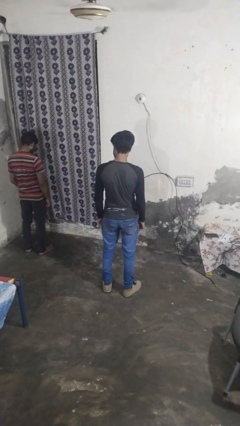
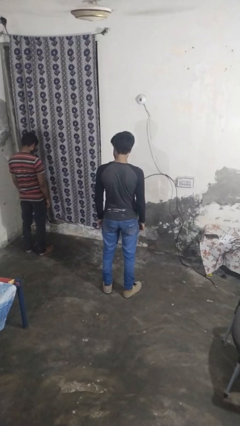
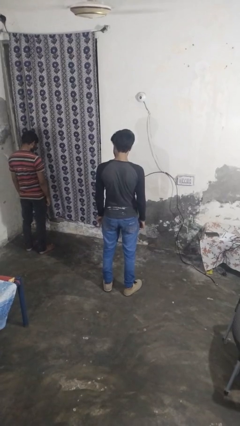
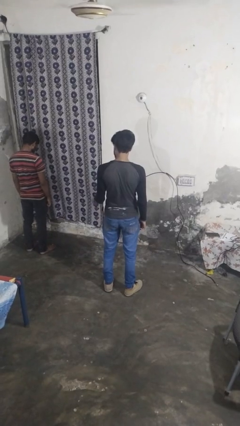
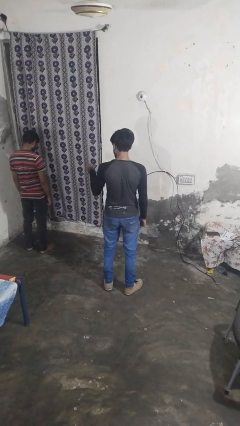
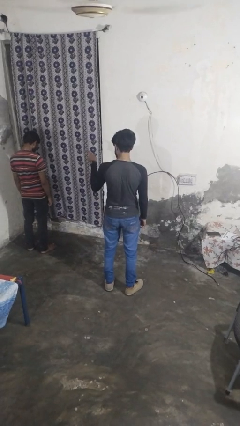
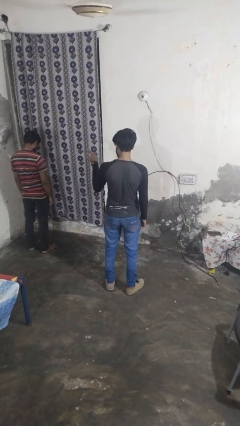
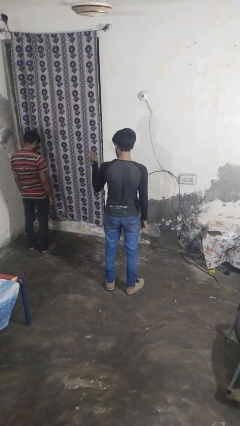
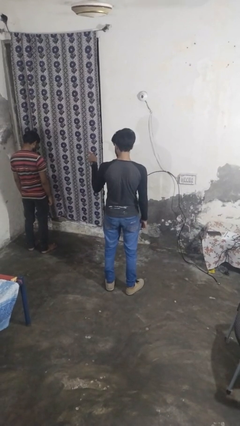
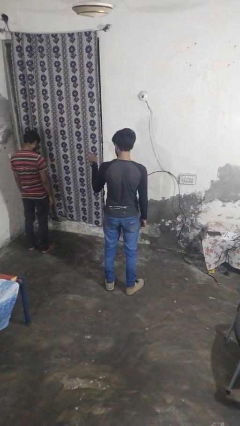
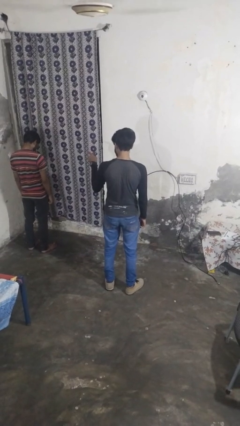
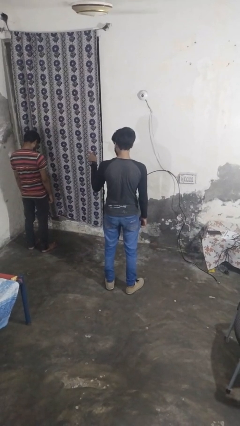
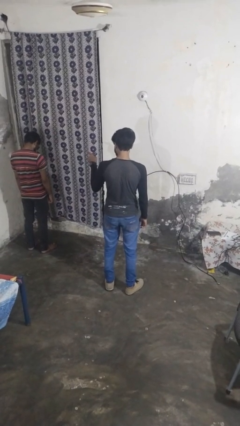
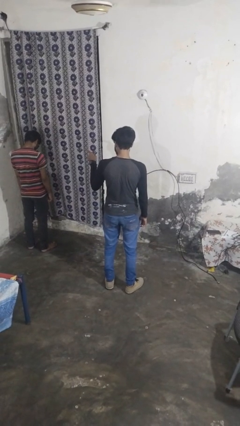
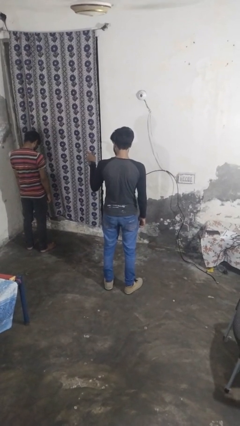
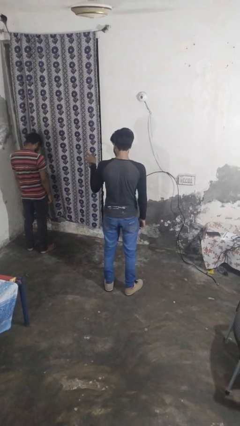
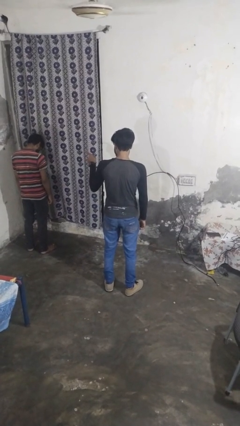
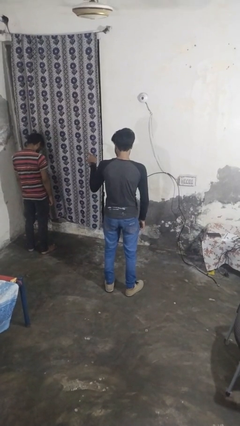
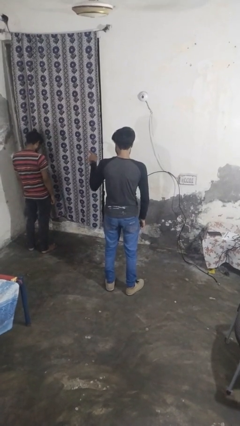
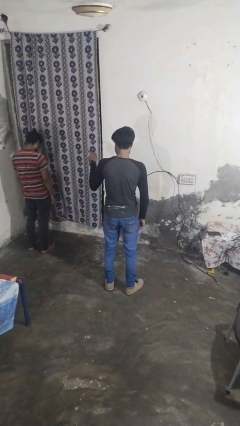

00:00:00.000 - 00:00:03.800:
person points at person

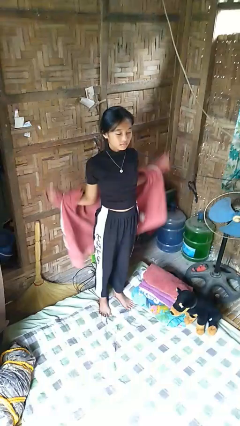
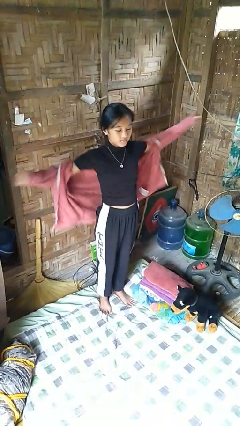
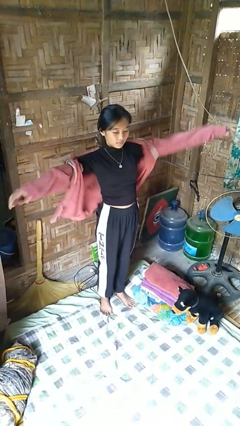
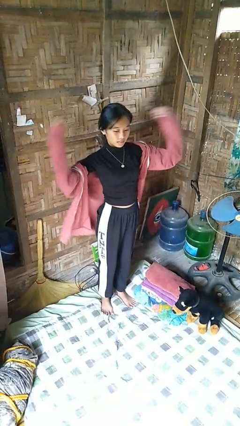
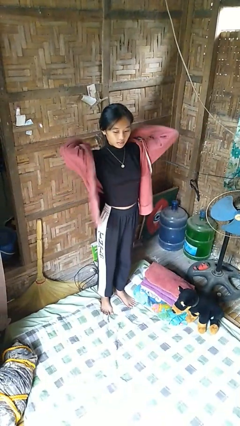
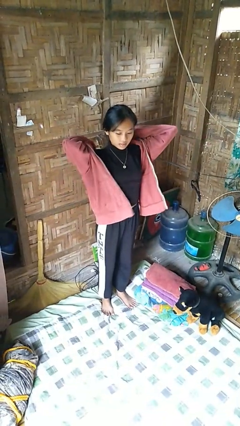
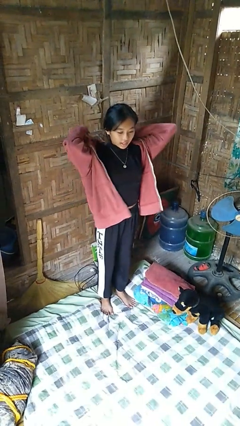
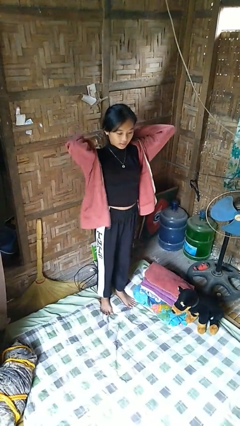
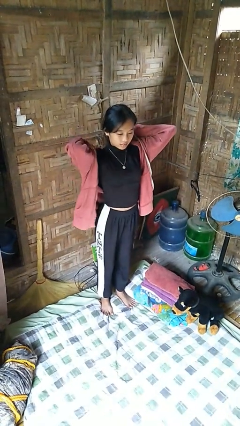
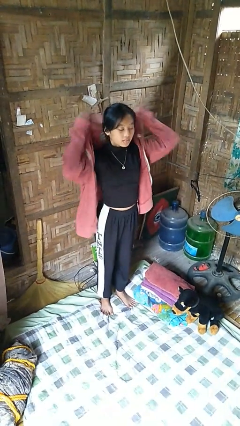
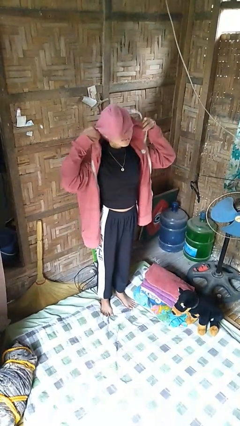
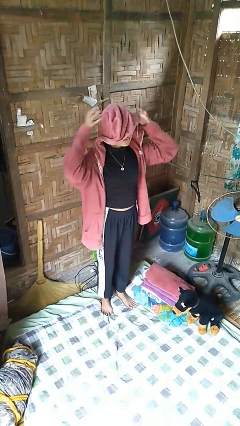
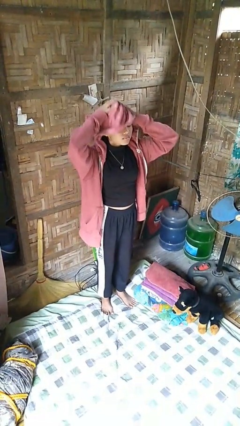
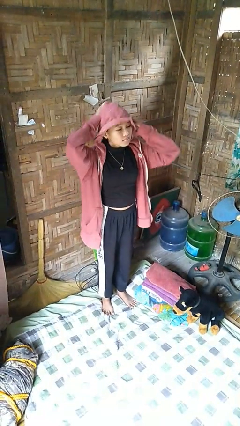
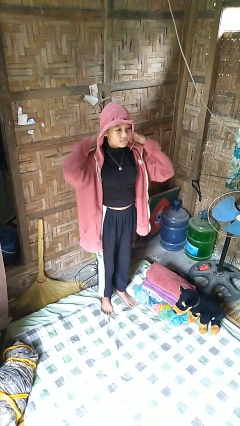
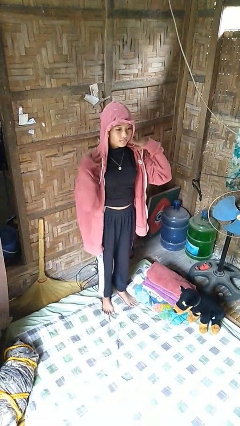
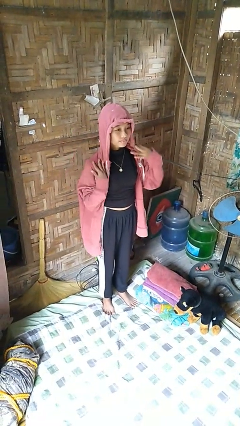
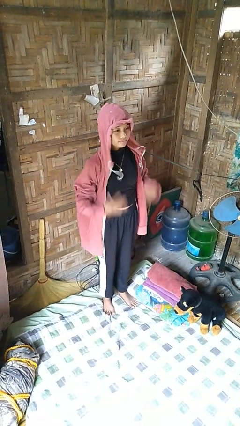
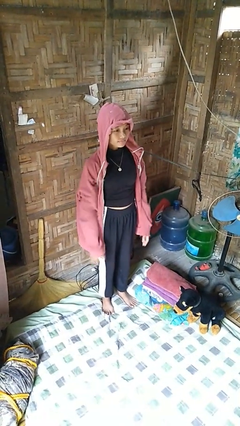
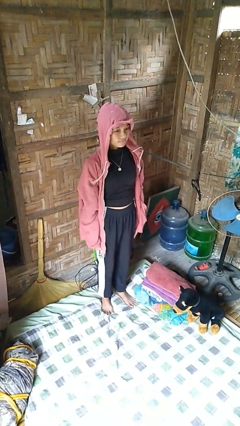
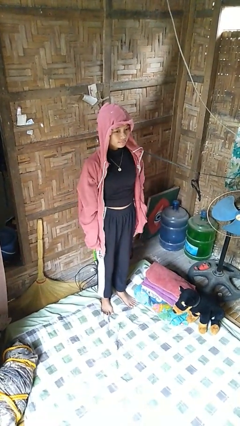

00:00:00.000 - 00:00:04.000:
person puts on hoodie

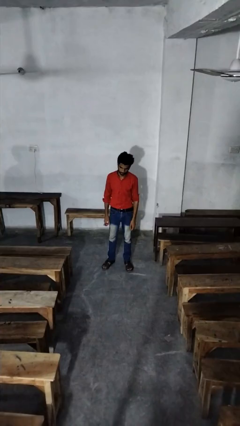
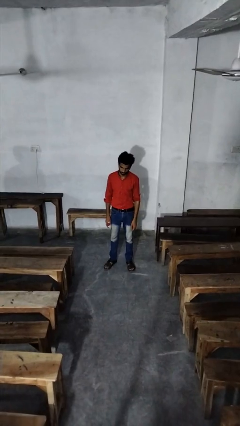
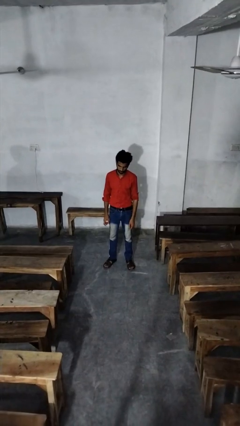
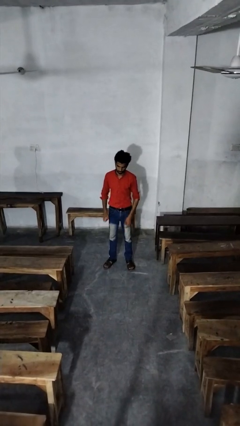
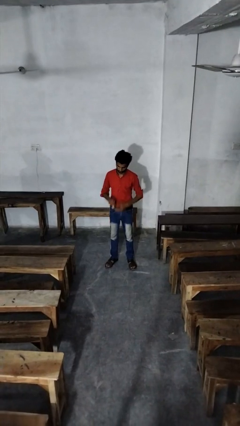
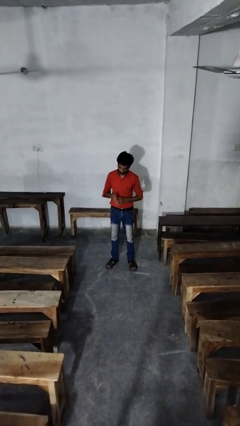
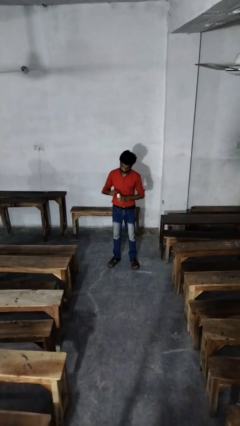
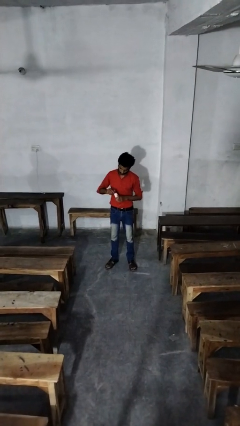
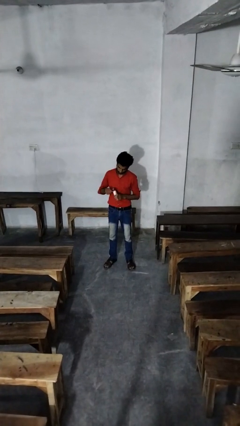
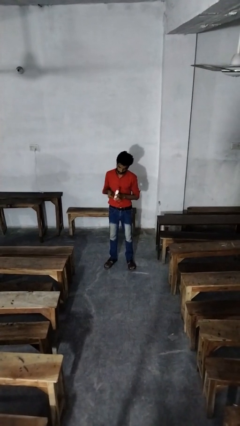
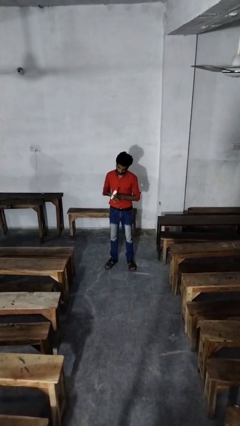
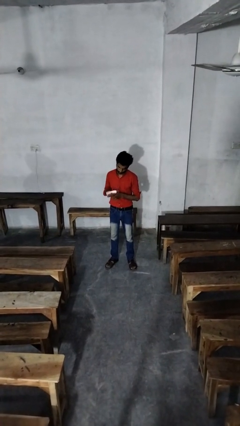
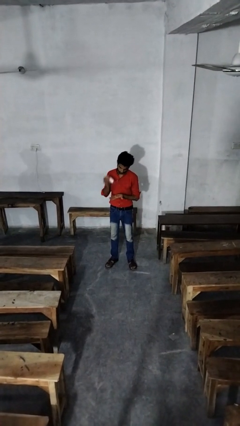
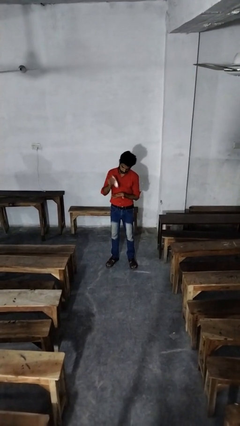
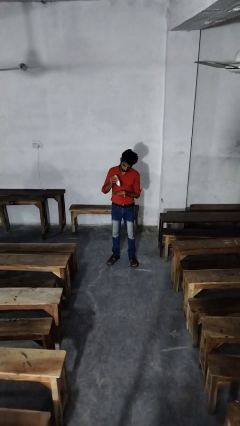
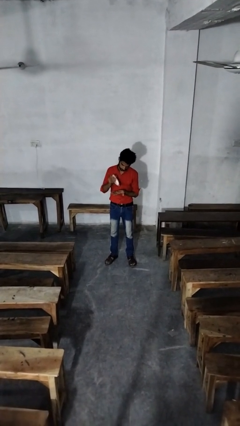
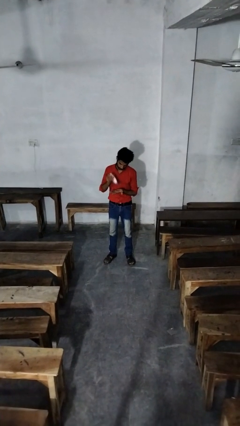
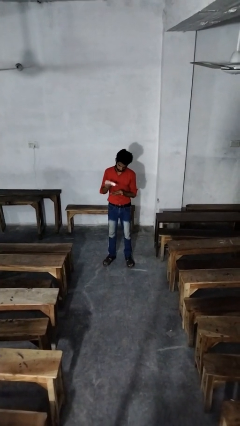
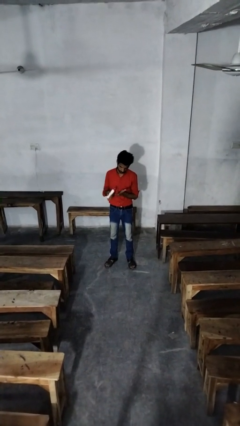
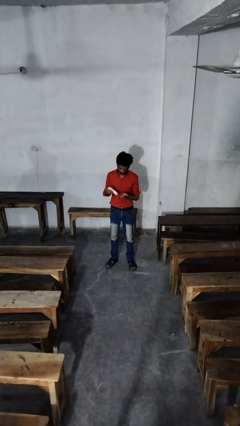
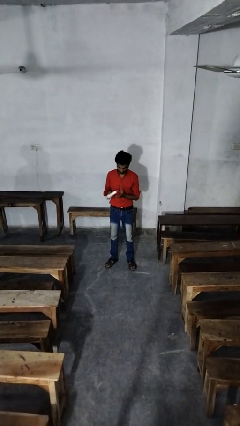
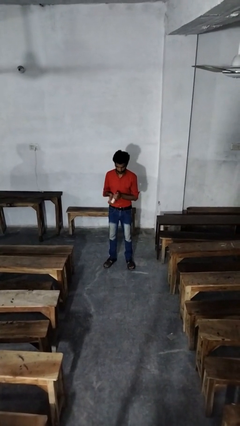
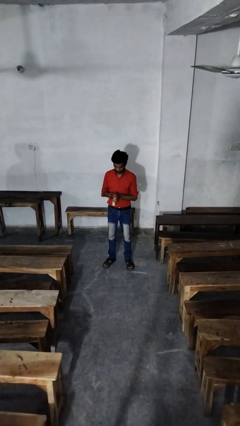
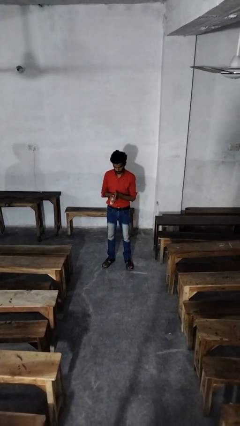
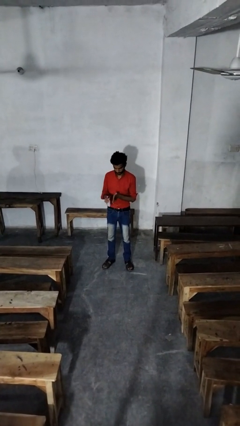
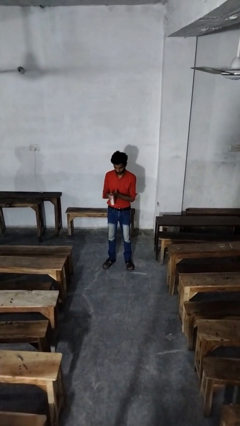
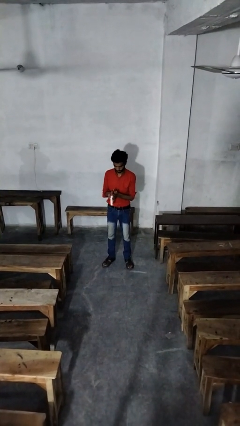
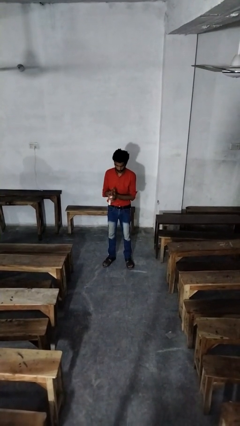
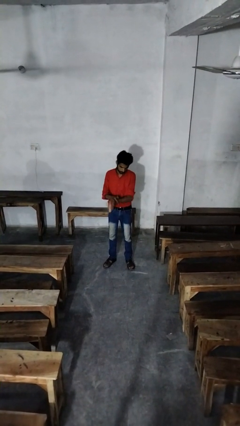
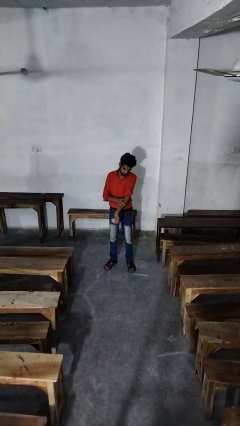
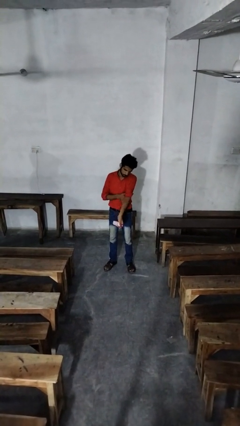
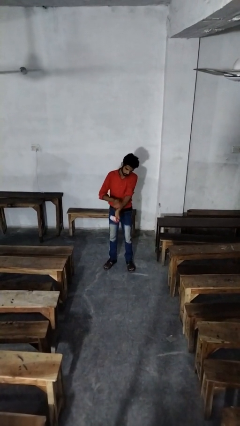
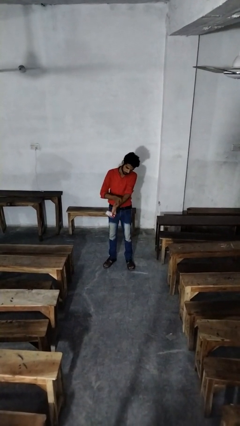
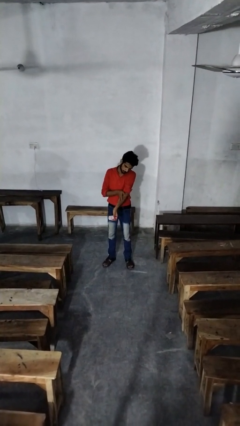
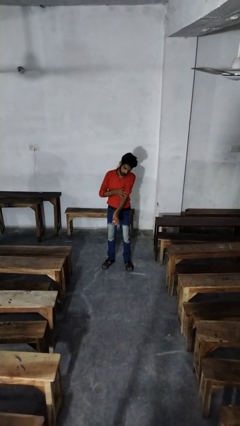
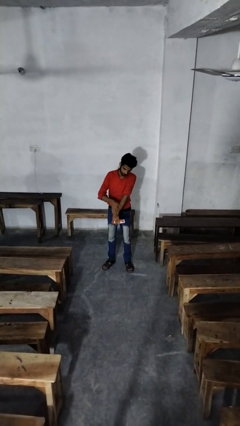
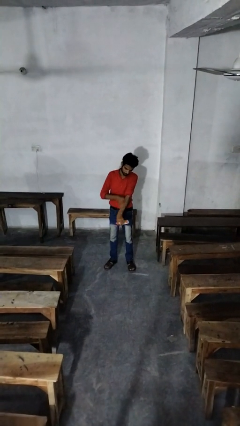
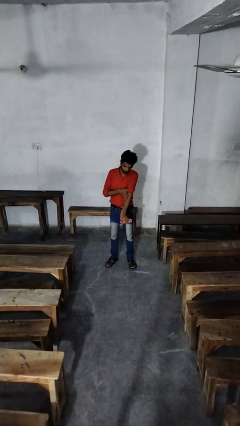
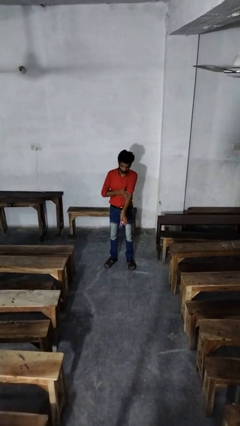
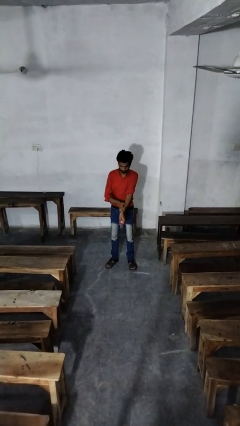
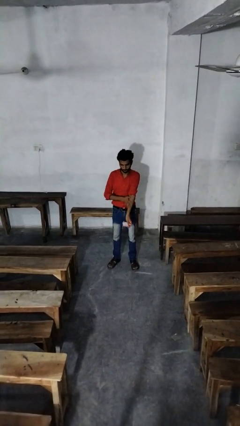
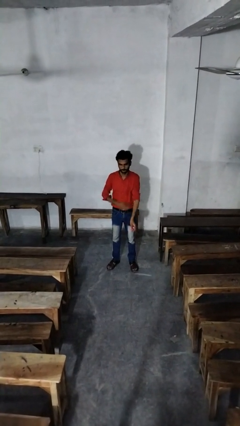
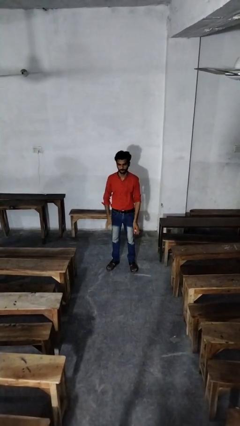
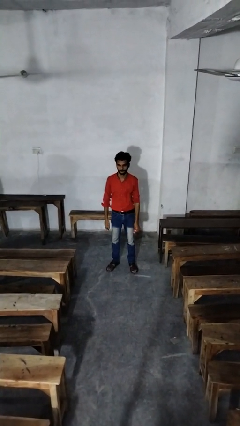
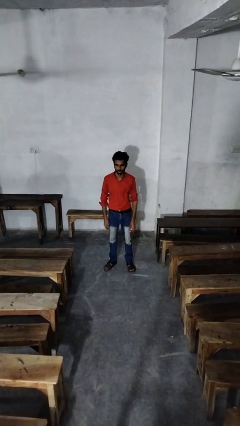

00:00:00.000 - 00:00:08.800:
person applies sunscreen

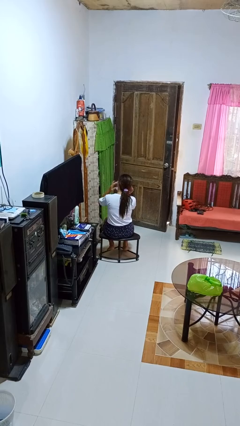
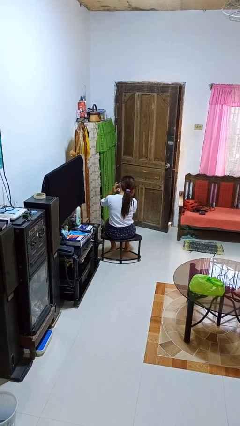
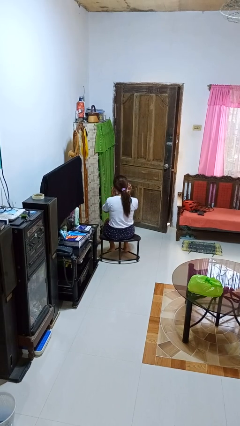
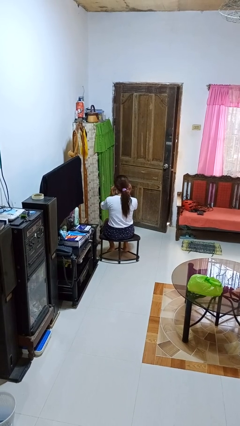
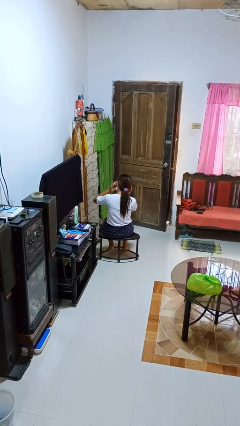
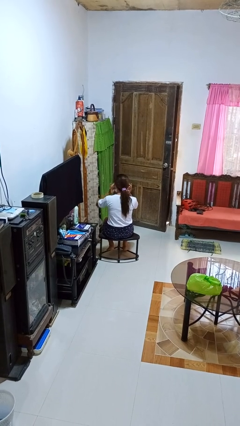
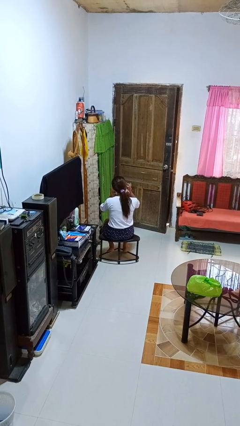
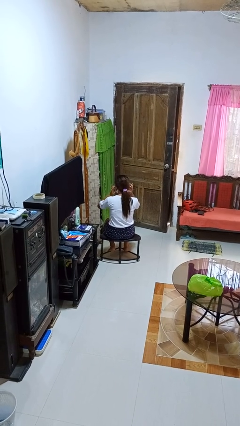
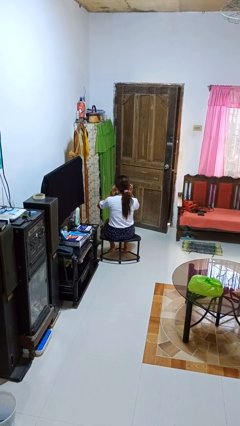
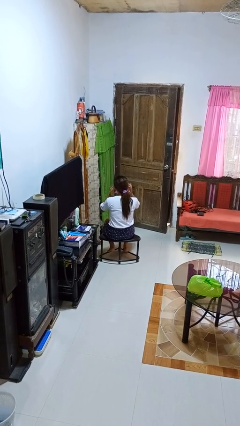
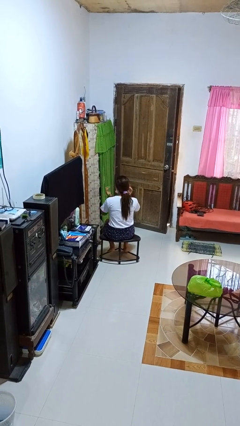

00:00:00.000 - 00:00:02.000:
person puts fingers in ear
